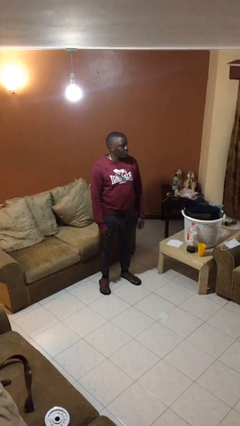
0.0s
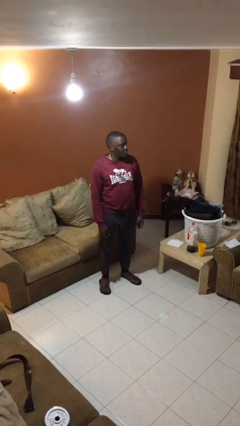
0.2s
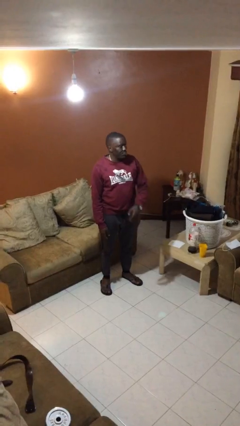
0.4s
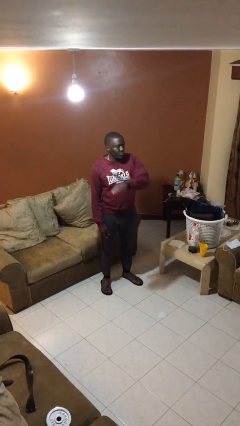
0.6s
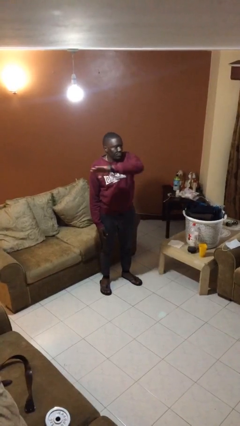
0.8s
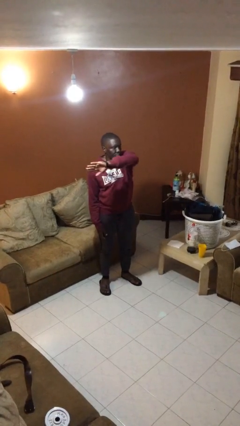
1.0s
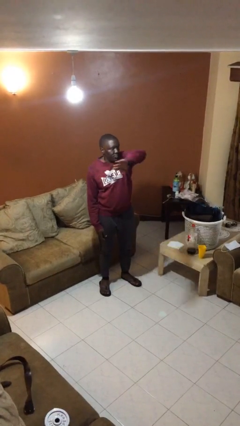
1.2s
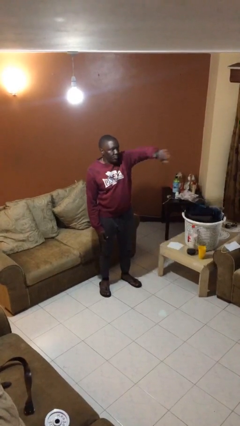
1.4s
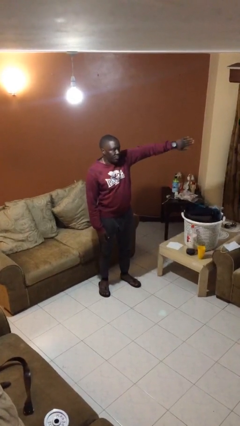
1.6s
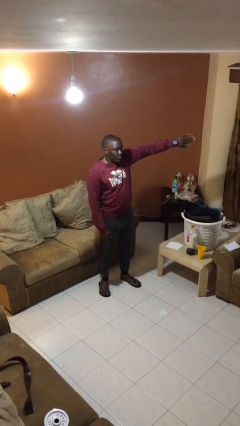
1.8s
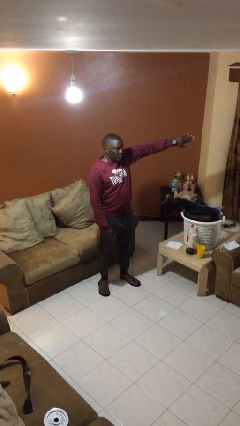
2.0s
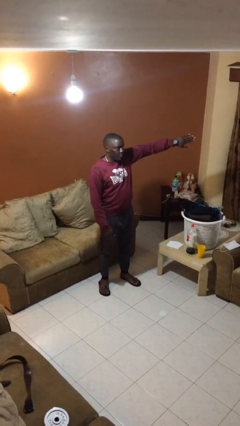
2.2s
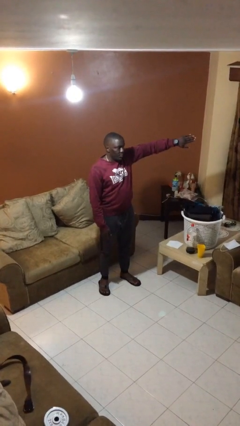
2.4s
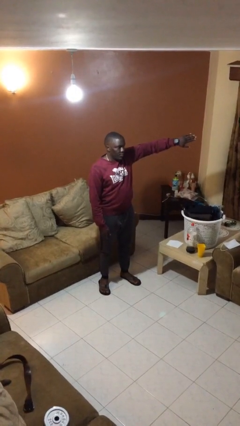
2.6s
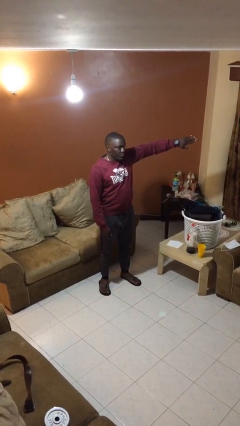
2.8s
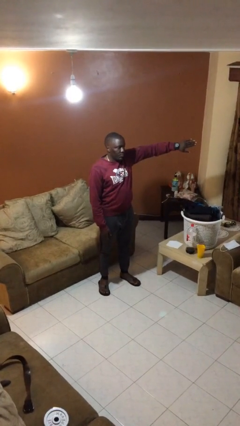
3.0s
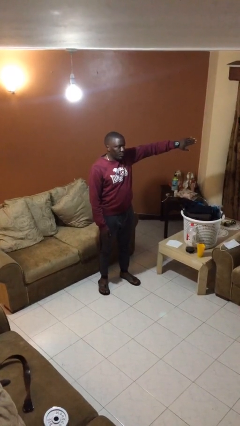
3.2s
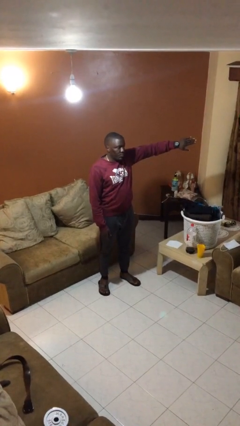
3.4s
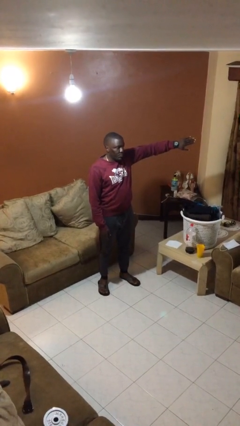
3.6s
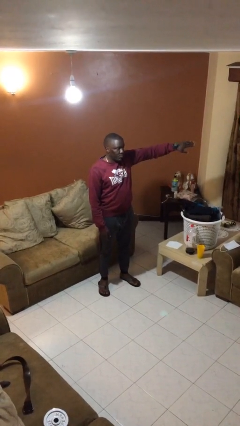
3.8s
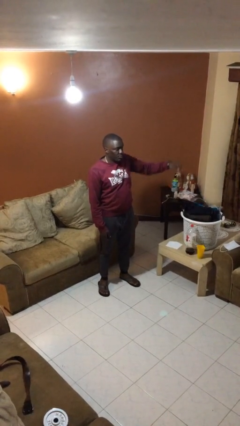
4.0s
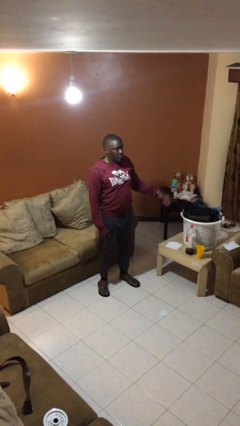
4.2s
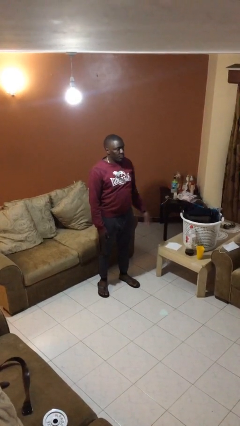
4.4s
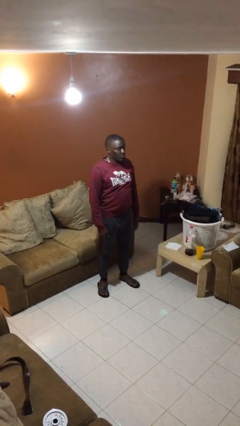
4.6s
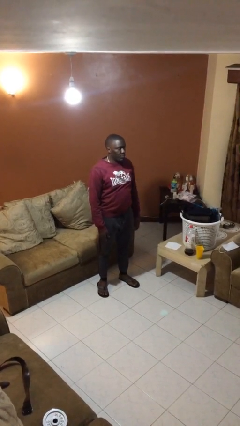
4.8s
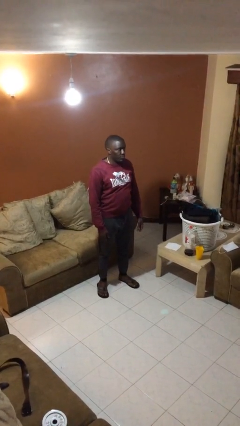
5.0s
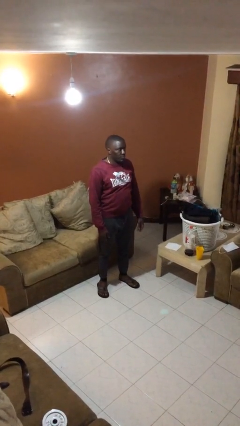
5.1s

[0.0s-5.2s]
person gestures swipe left

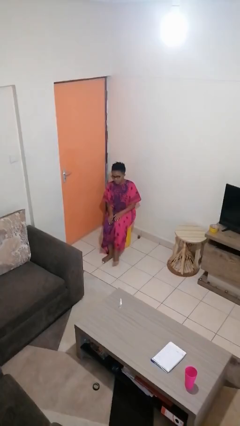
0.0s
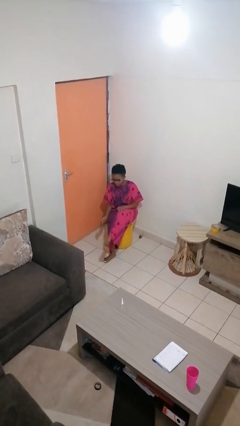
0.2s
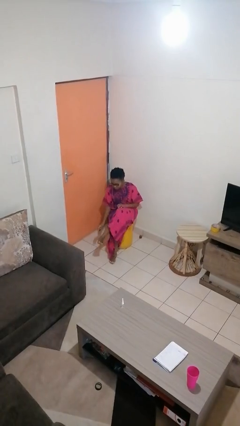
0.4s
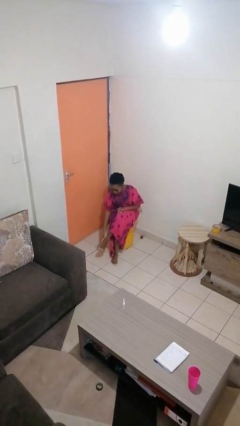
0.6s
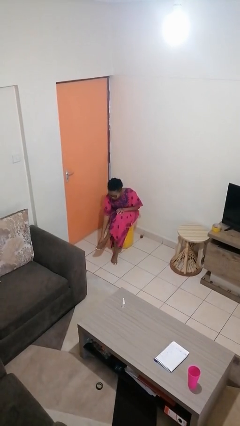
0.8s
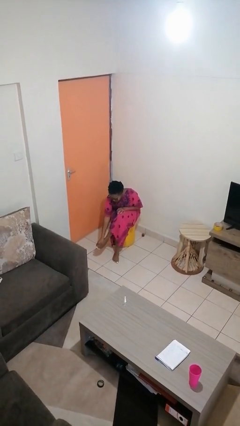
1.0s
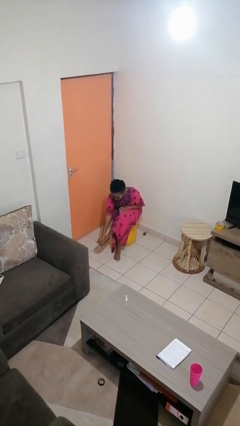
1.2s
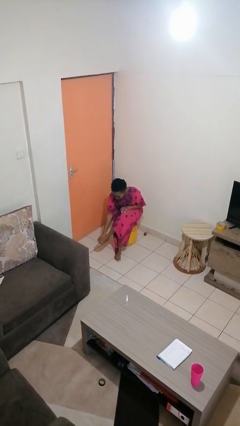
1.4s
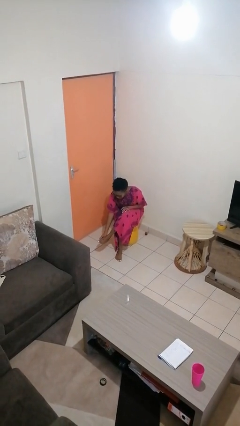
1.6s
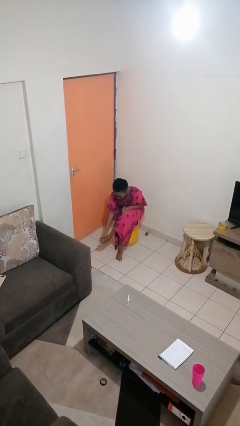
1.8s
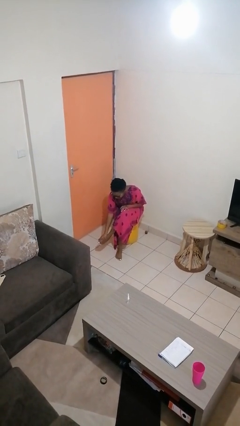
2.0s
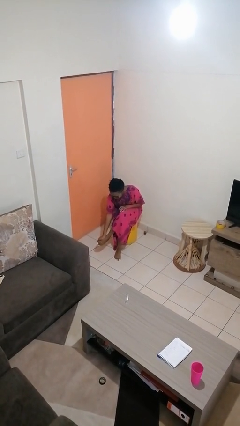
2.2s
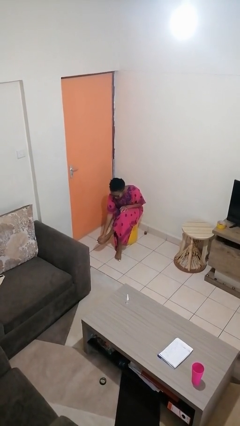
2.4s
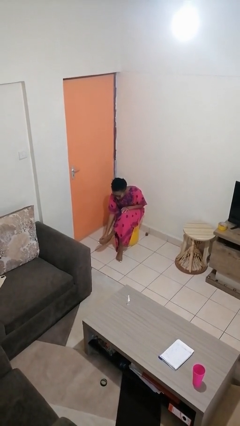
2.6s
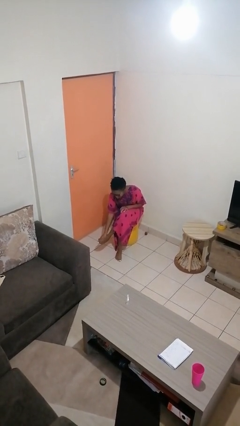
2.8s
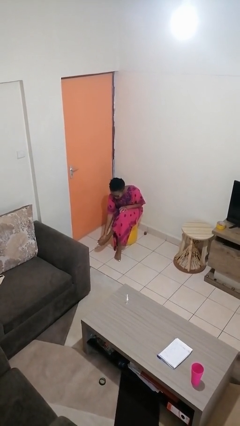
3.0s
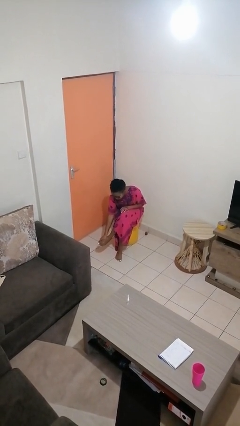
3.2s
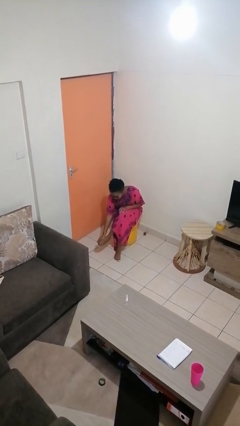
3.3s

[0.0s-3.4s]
person rubs foot

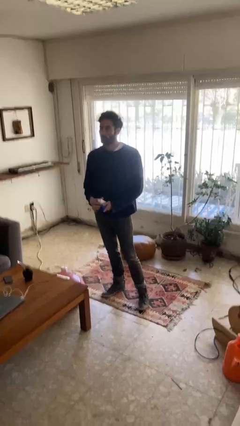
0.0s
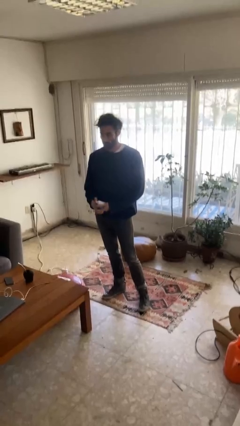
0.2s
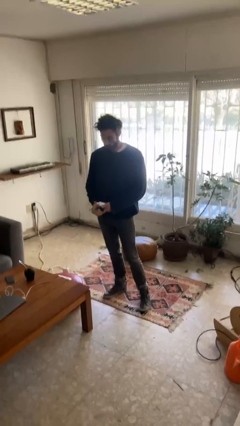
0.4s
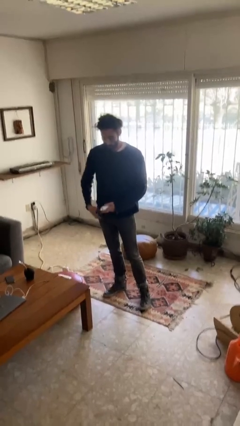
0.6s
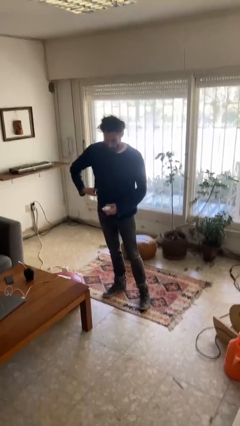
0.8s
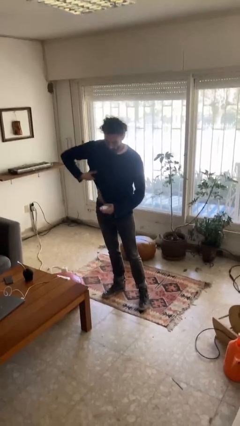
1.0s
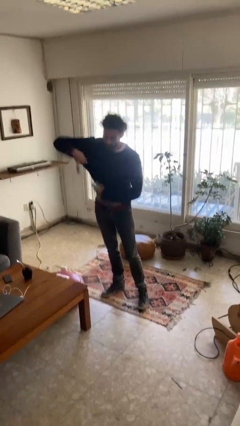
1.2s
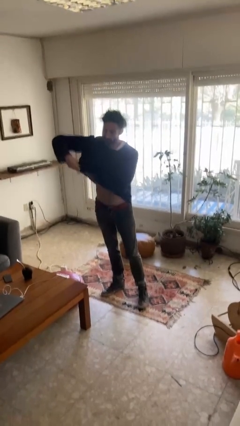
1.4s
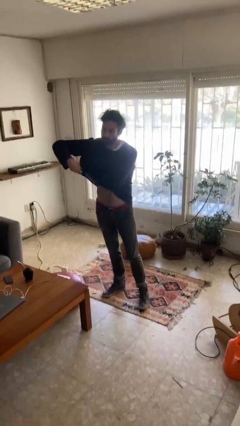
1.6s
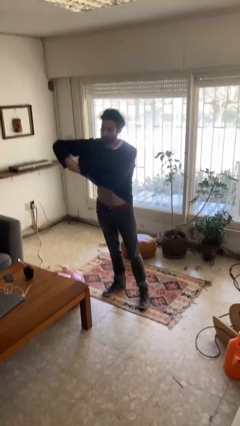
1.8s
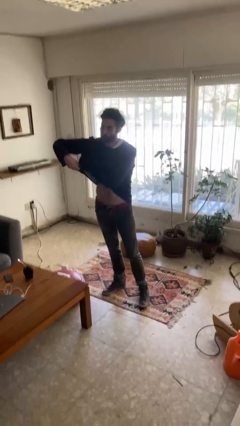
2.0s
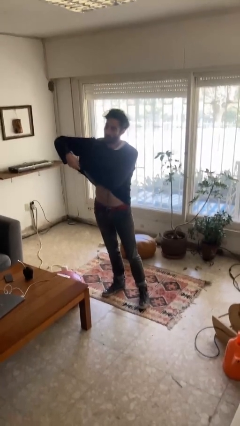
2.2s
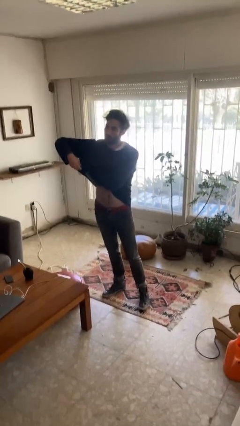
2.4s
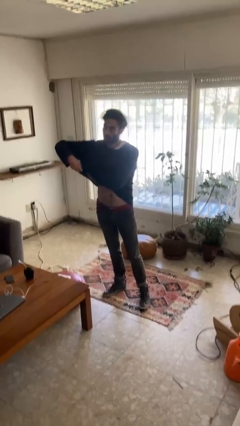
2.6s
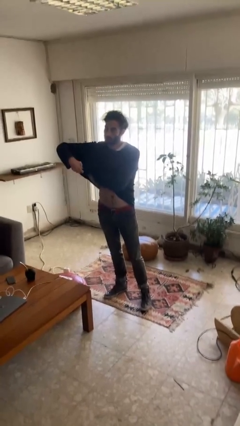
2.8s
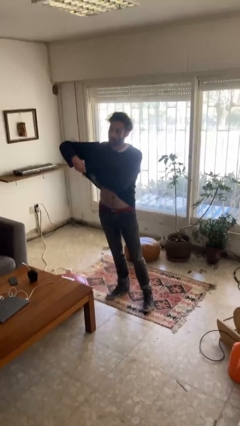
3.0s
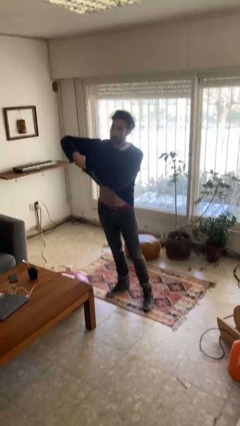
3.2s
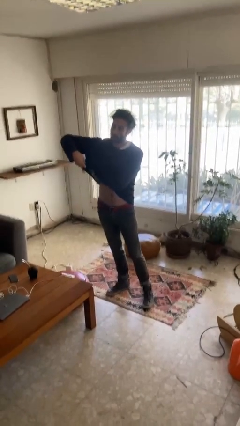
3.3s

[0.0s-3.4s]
person applies deodorant

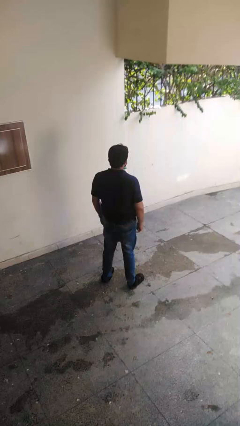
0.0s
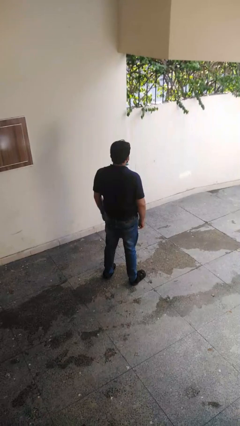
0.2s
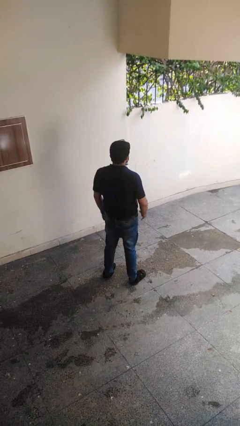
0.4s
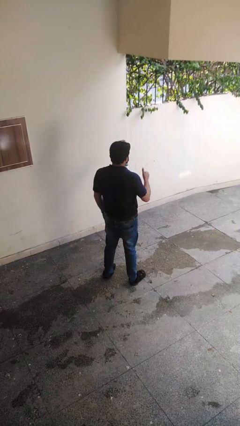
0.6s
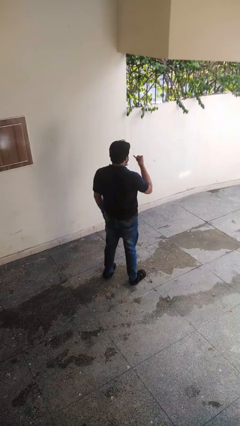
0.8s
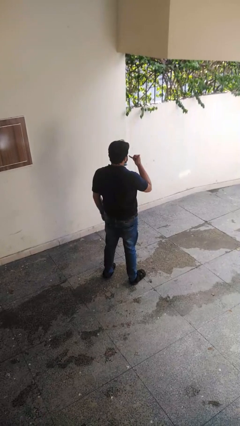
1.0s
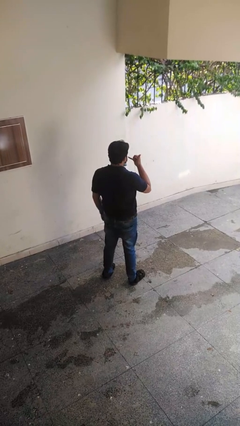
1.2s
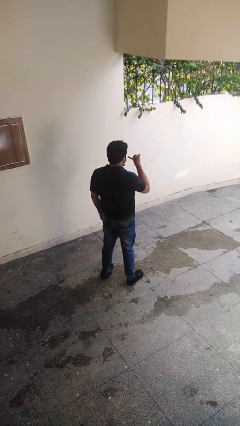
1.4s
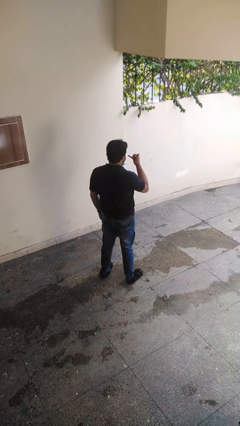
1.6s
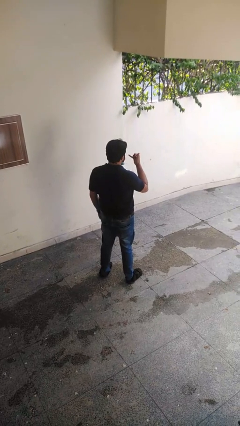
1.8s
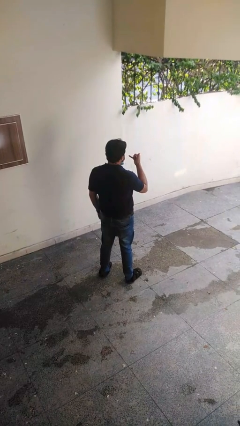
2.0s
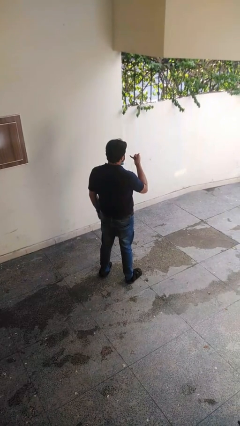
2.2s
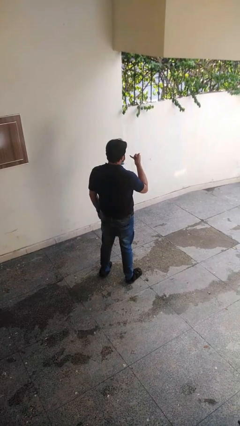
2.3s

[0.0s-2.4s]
person gestures hang loose

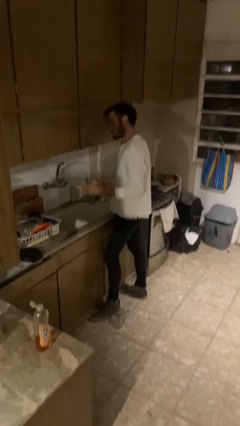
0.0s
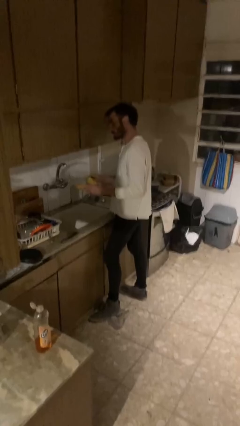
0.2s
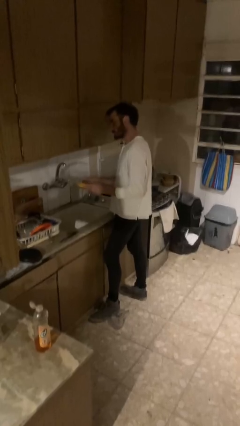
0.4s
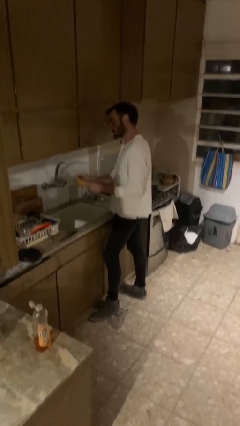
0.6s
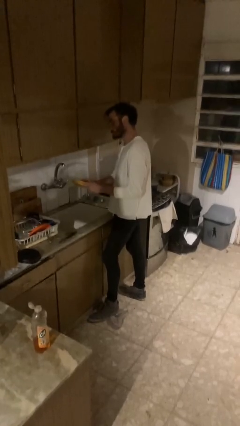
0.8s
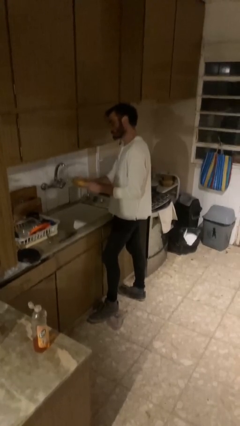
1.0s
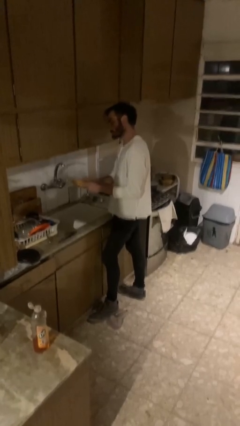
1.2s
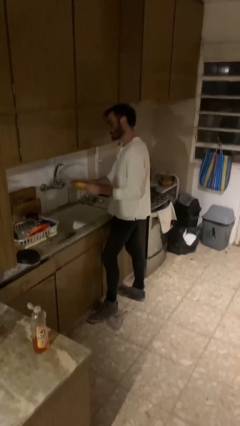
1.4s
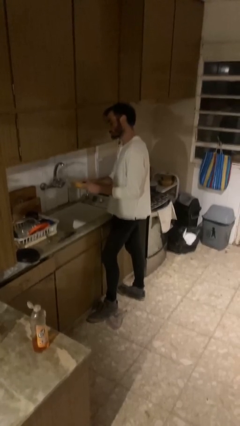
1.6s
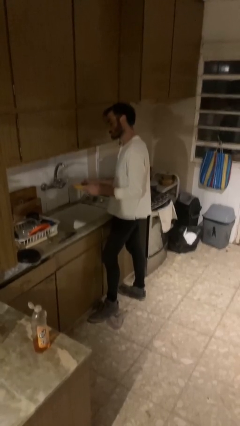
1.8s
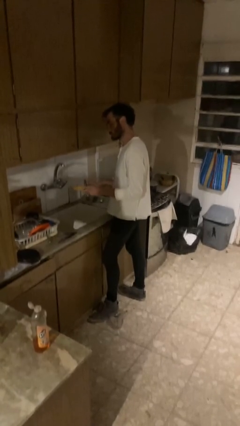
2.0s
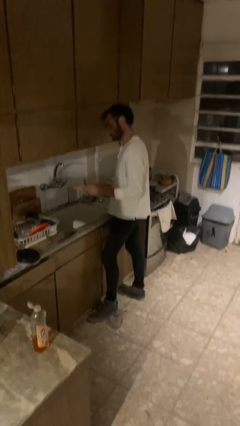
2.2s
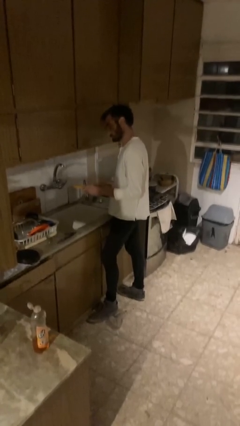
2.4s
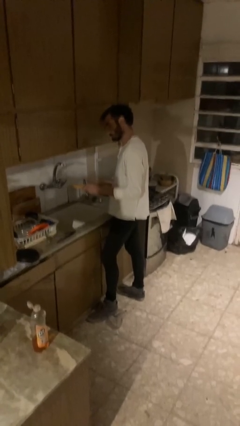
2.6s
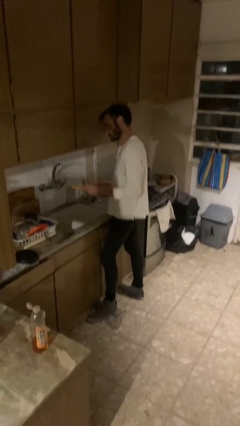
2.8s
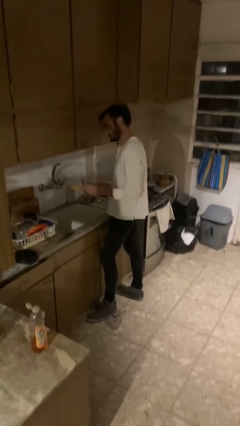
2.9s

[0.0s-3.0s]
person washes dish
